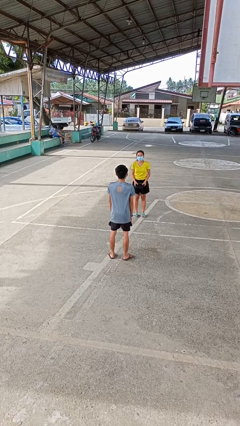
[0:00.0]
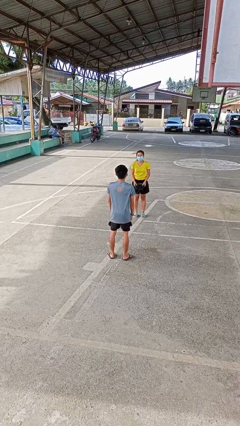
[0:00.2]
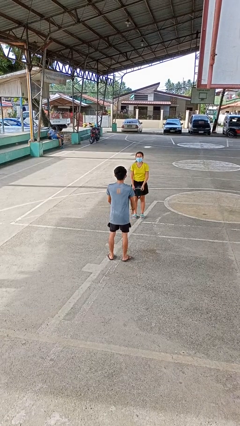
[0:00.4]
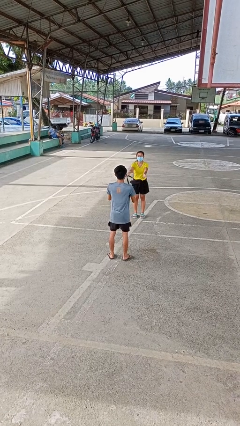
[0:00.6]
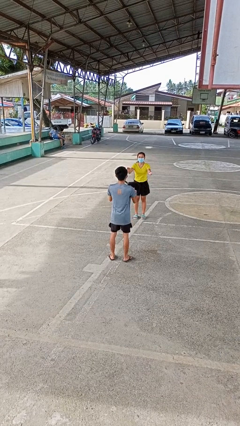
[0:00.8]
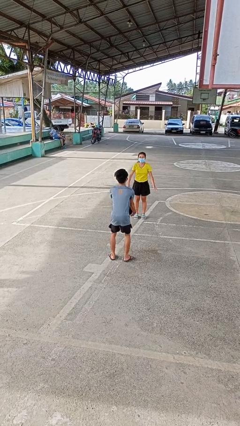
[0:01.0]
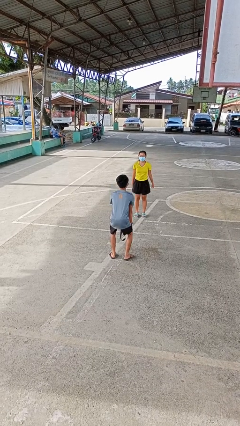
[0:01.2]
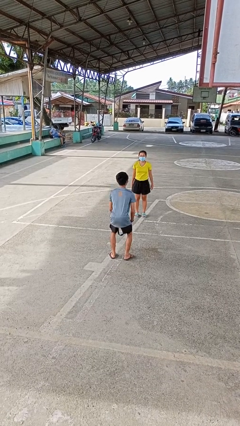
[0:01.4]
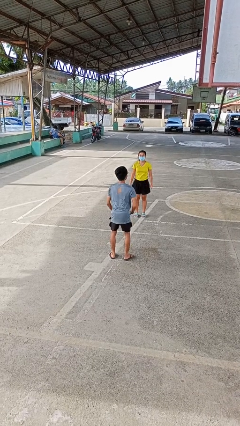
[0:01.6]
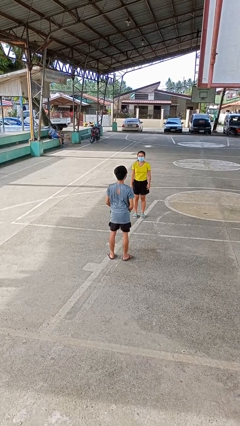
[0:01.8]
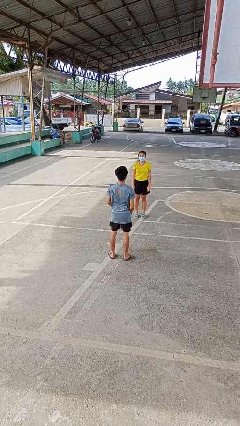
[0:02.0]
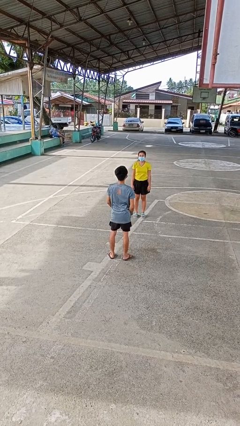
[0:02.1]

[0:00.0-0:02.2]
person catches object from person

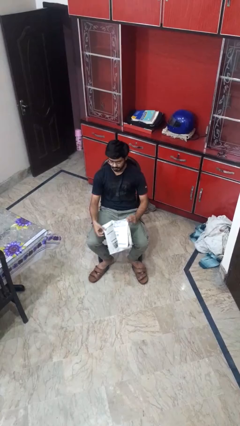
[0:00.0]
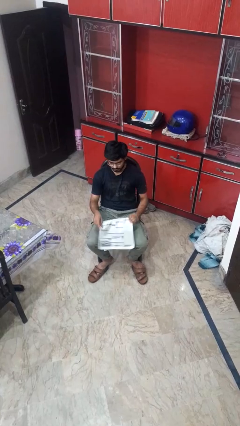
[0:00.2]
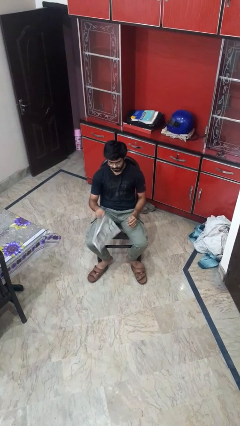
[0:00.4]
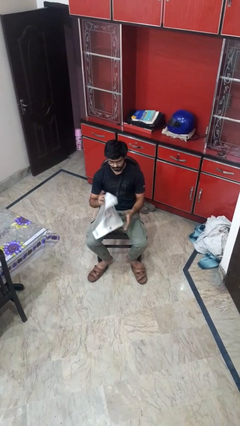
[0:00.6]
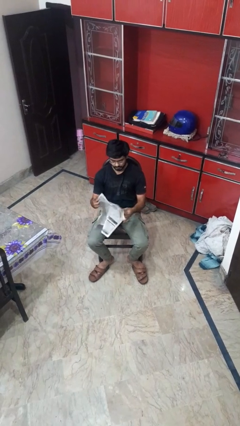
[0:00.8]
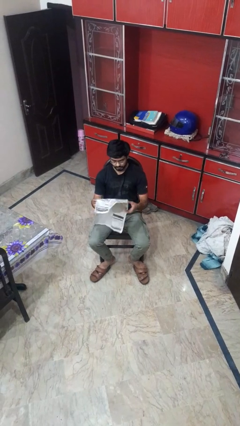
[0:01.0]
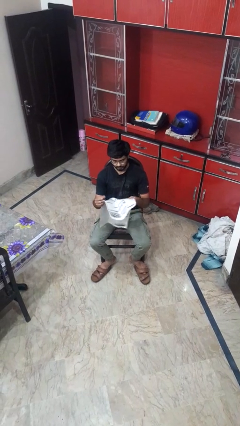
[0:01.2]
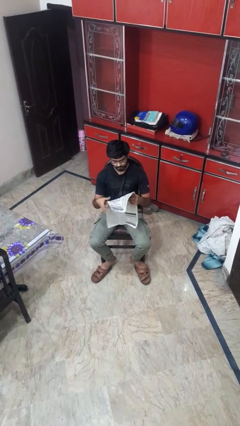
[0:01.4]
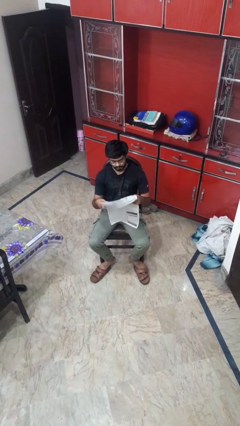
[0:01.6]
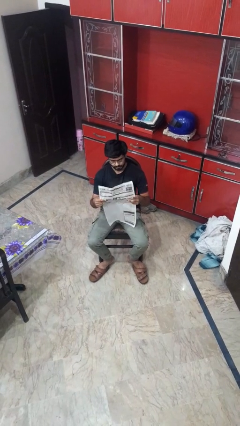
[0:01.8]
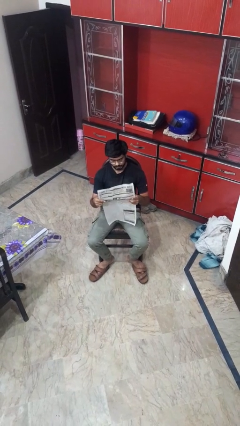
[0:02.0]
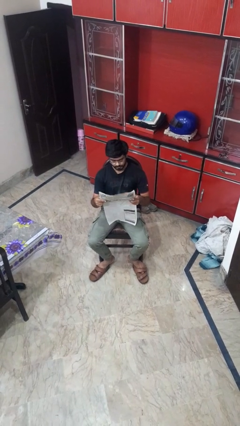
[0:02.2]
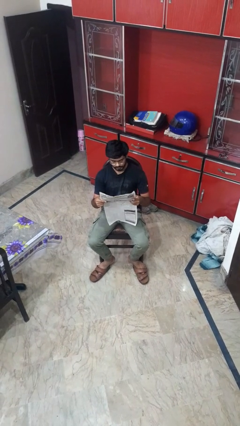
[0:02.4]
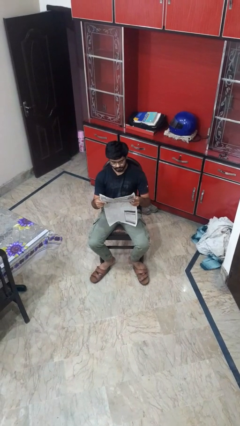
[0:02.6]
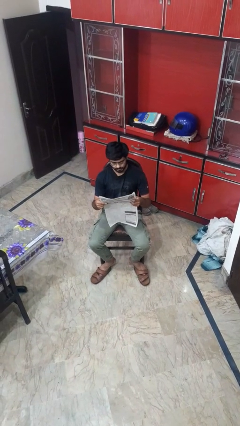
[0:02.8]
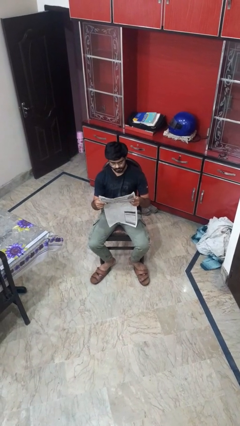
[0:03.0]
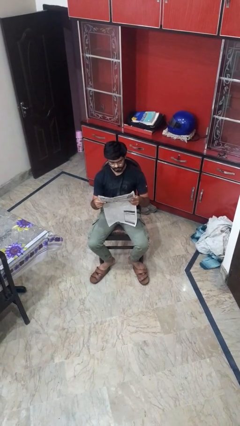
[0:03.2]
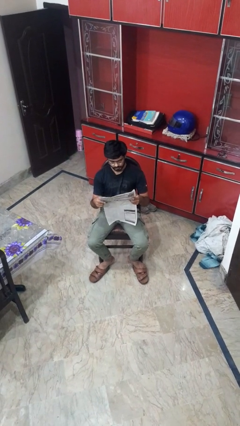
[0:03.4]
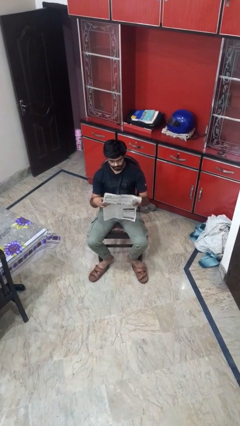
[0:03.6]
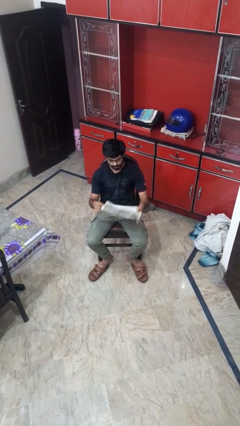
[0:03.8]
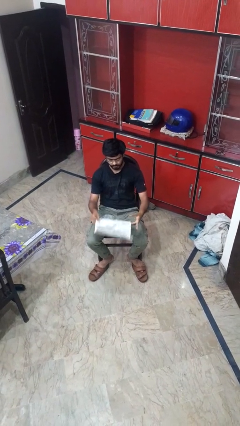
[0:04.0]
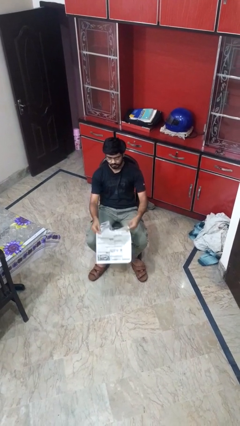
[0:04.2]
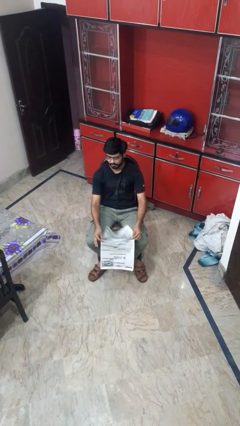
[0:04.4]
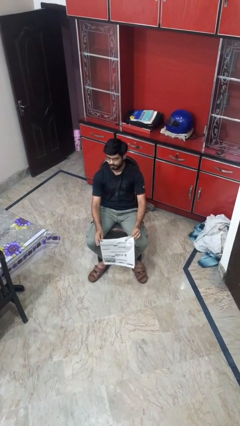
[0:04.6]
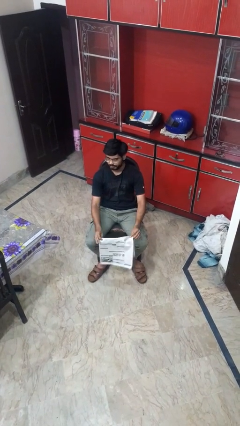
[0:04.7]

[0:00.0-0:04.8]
person reads newspaper

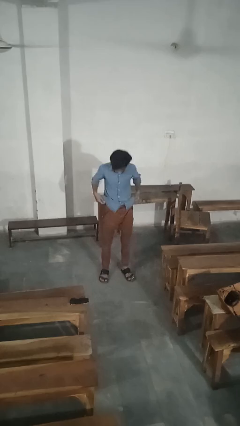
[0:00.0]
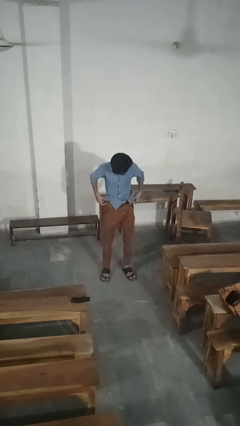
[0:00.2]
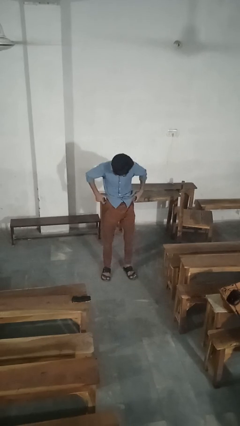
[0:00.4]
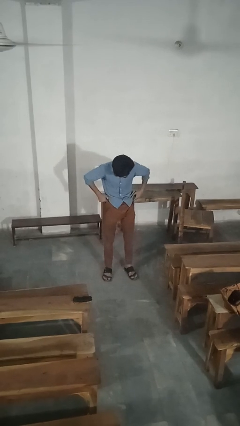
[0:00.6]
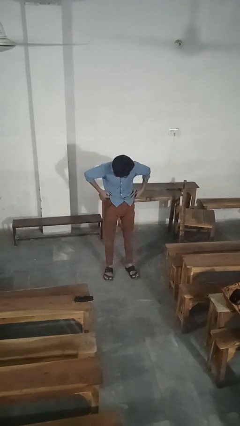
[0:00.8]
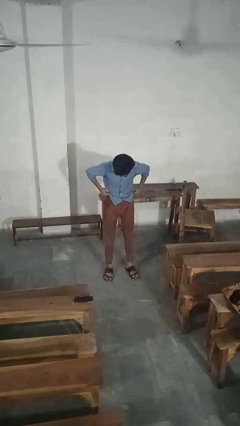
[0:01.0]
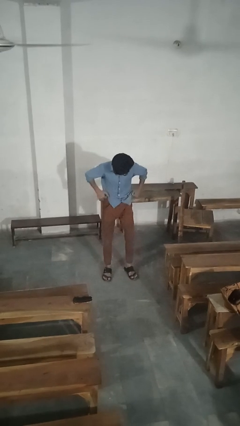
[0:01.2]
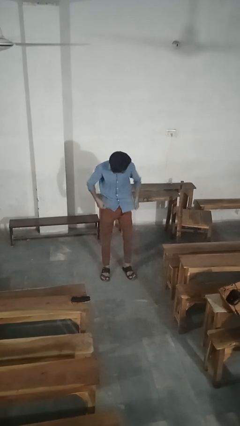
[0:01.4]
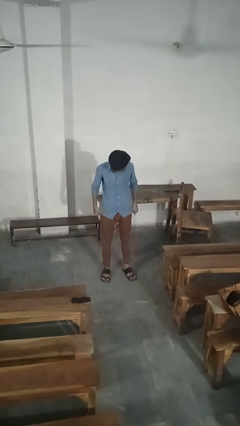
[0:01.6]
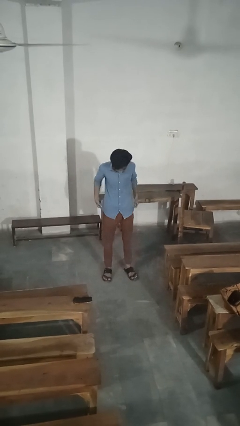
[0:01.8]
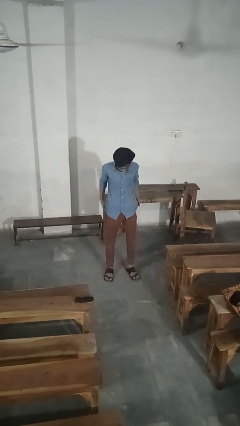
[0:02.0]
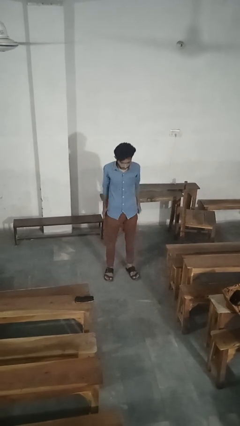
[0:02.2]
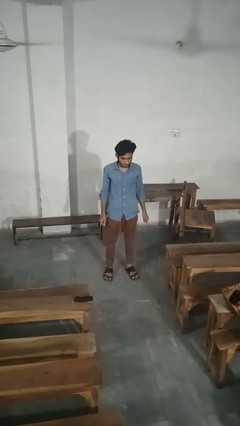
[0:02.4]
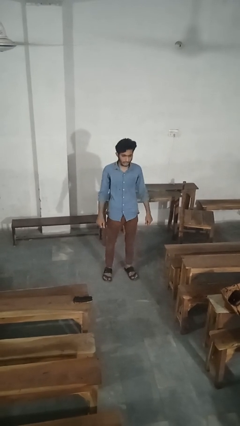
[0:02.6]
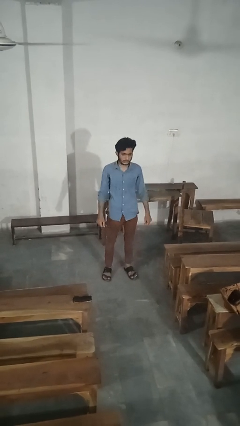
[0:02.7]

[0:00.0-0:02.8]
person hikes up pants

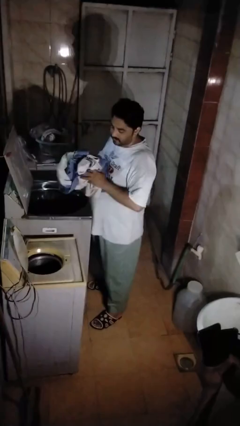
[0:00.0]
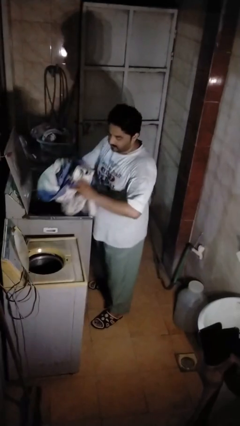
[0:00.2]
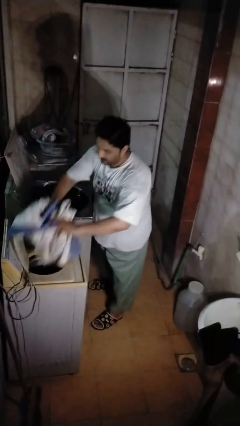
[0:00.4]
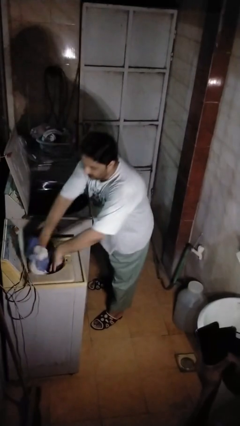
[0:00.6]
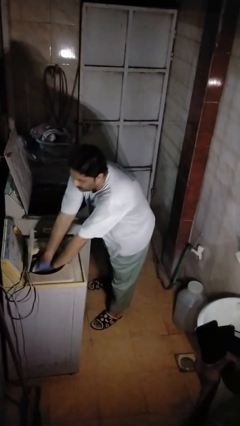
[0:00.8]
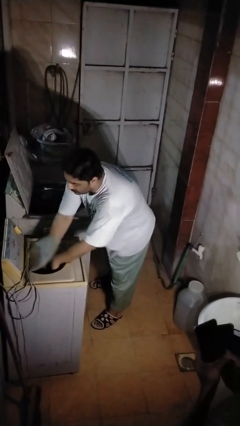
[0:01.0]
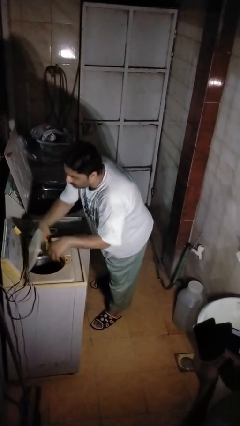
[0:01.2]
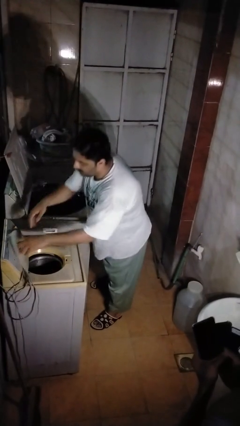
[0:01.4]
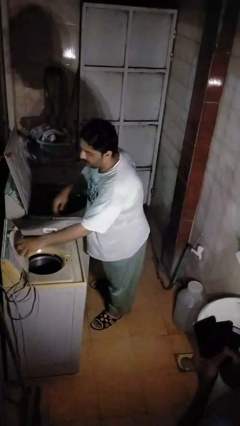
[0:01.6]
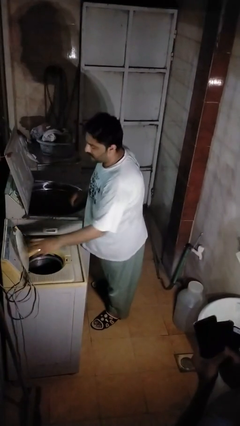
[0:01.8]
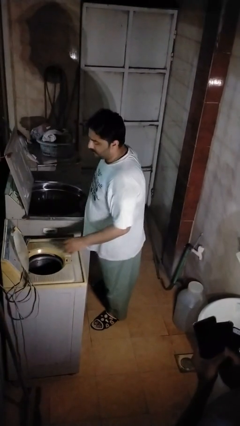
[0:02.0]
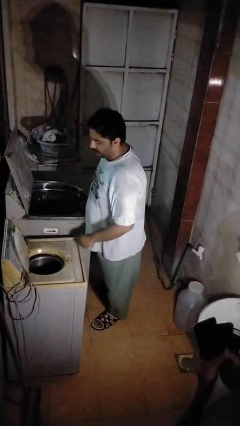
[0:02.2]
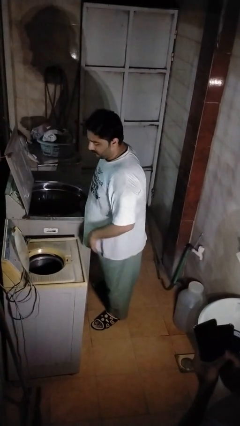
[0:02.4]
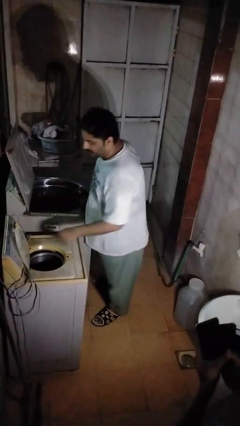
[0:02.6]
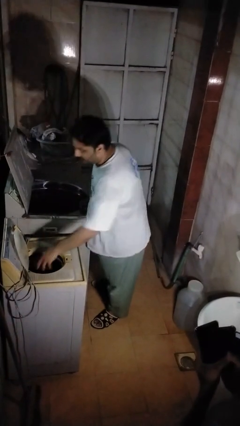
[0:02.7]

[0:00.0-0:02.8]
person loads dryer

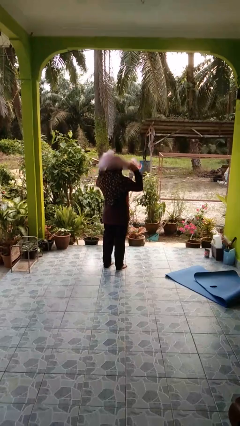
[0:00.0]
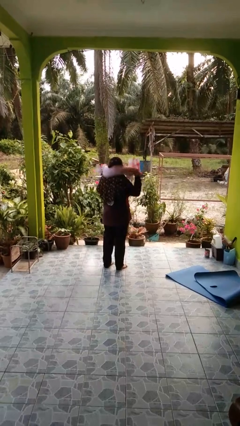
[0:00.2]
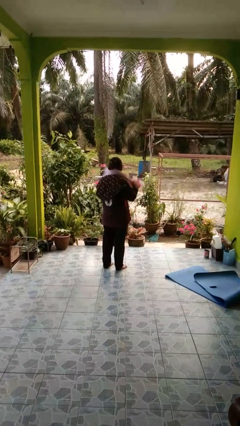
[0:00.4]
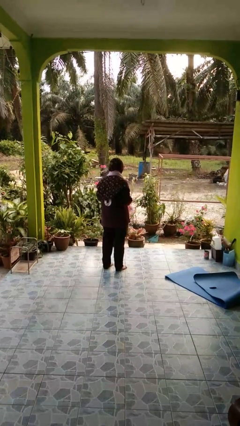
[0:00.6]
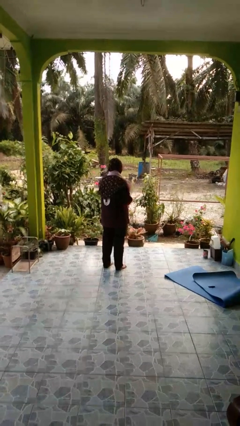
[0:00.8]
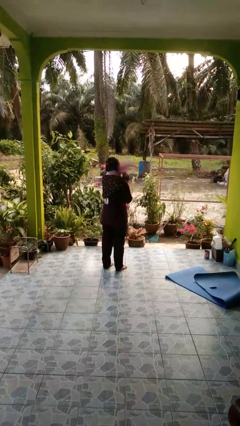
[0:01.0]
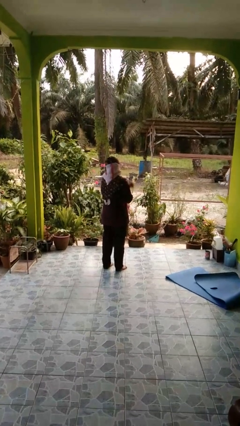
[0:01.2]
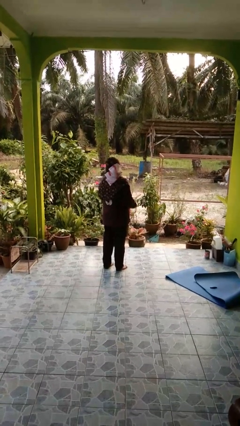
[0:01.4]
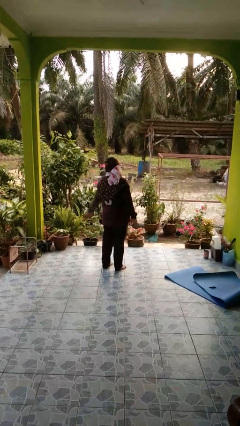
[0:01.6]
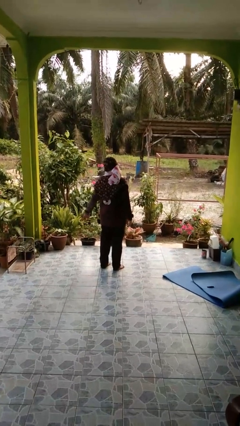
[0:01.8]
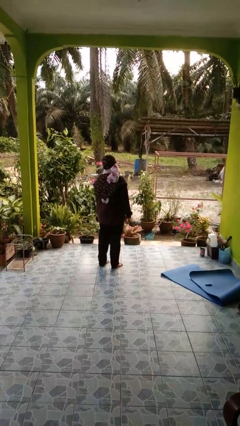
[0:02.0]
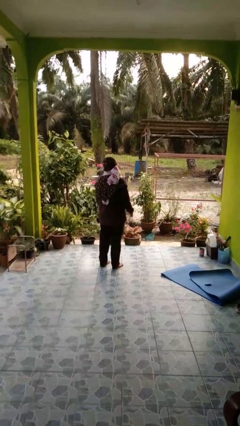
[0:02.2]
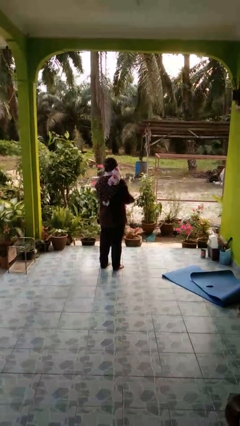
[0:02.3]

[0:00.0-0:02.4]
person puts on scarf

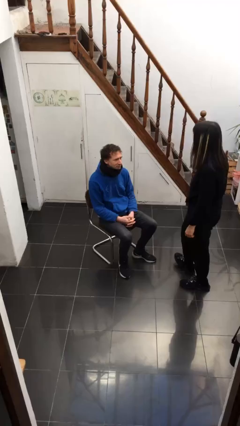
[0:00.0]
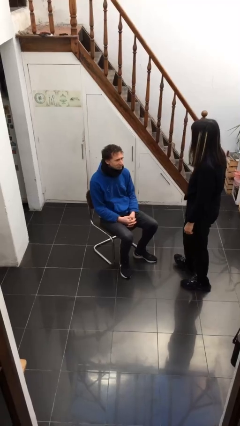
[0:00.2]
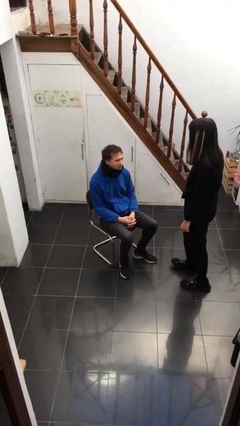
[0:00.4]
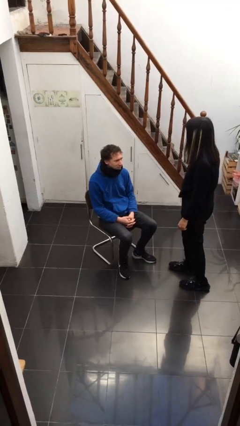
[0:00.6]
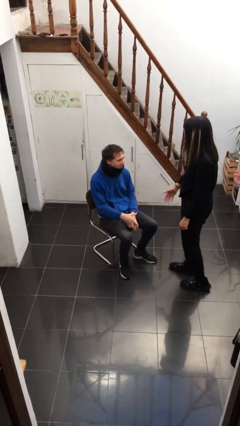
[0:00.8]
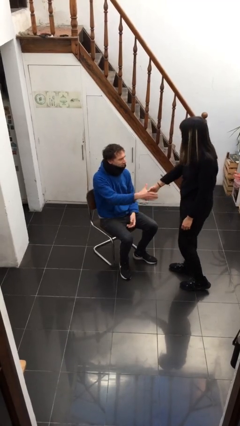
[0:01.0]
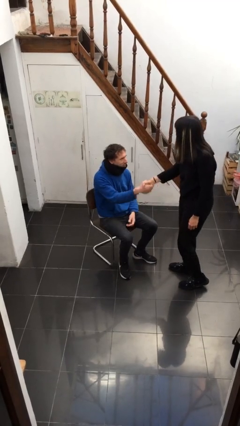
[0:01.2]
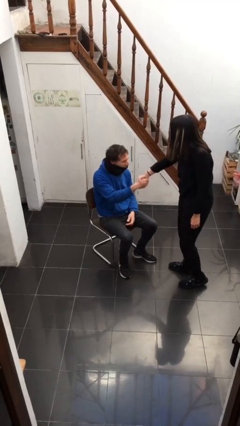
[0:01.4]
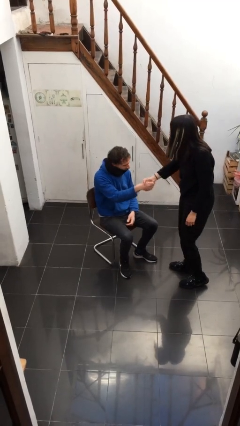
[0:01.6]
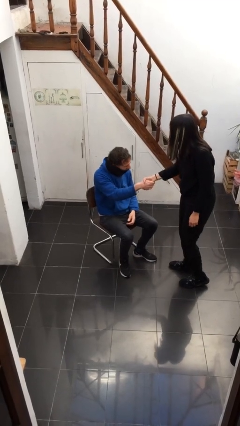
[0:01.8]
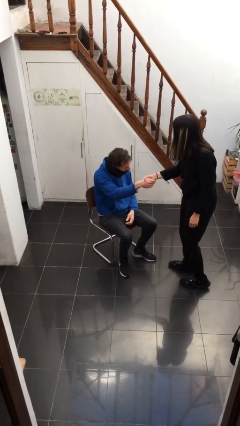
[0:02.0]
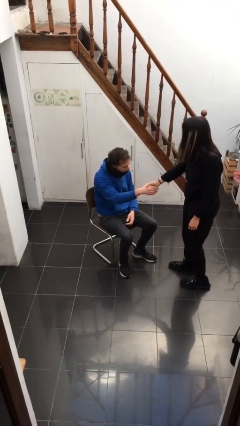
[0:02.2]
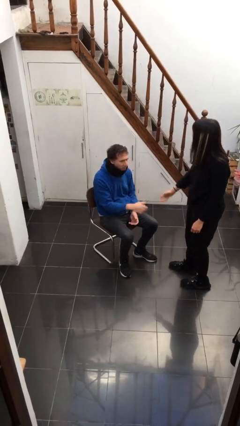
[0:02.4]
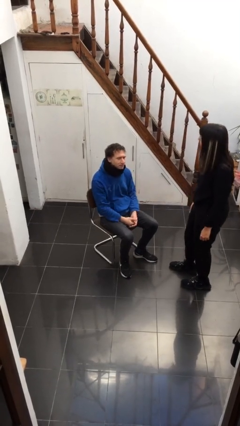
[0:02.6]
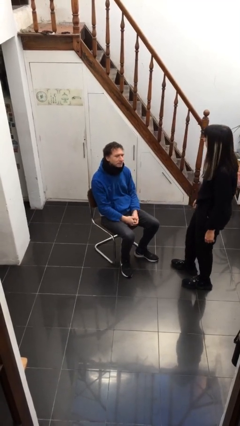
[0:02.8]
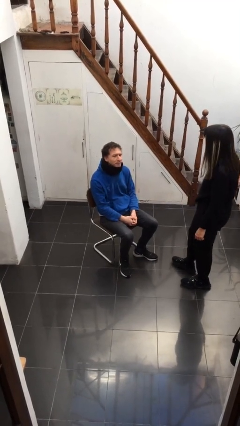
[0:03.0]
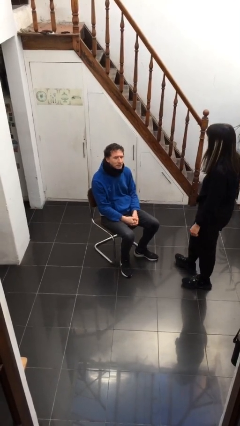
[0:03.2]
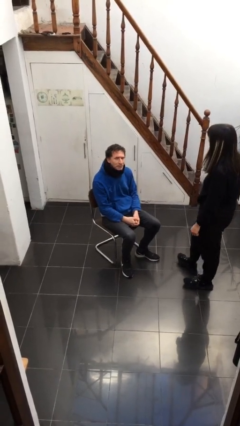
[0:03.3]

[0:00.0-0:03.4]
person shakes hand
